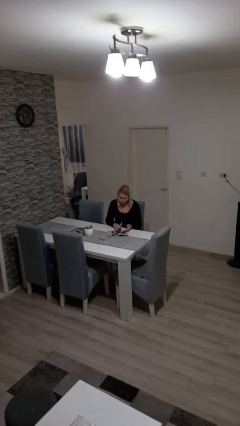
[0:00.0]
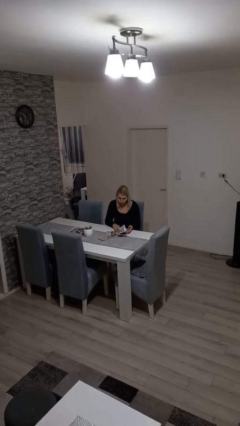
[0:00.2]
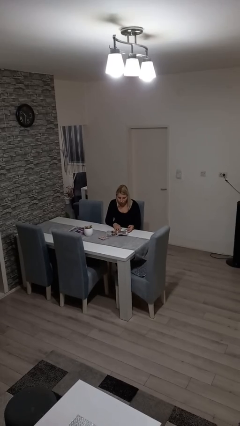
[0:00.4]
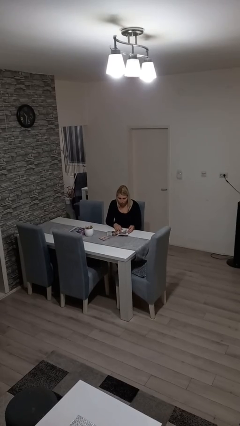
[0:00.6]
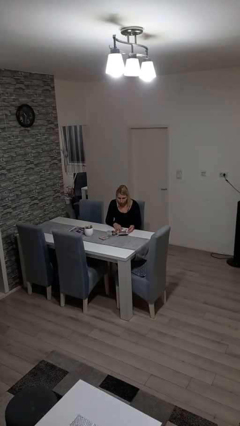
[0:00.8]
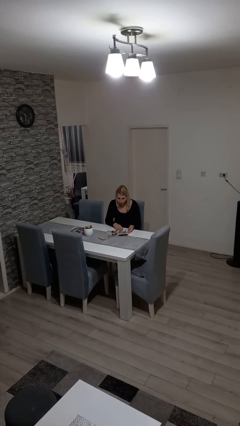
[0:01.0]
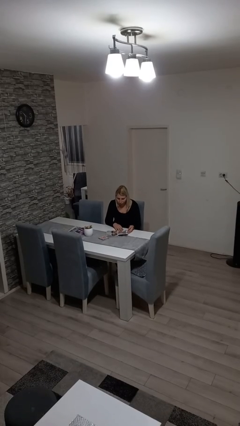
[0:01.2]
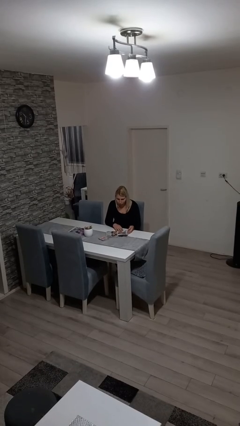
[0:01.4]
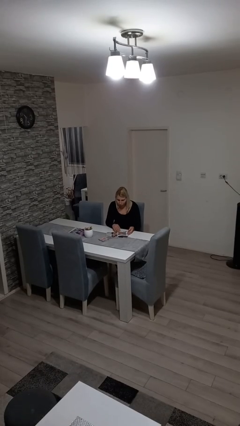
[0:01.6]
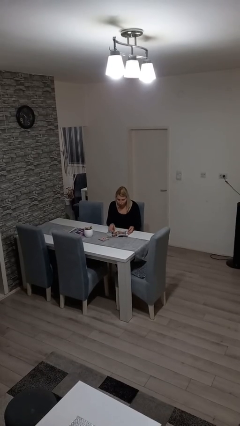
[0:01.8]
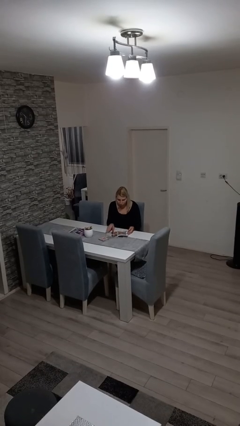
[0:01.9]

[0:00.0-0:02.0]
person reads magazine

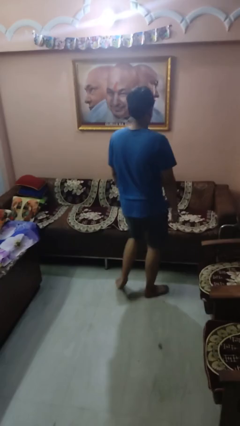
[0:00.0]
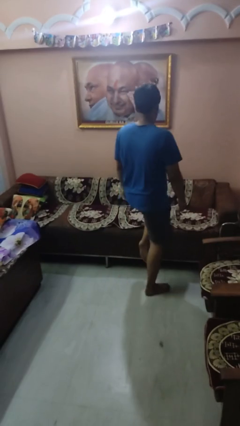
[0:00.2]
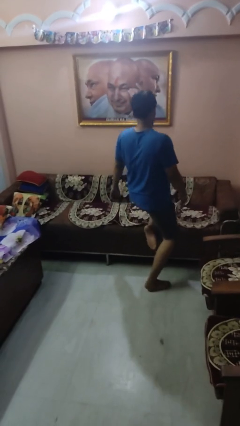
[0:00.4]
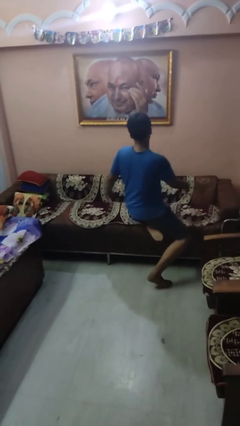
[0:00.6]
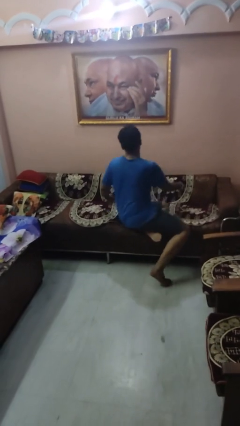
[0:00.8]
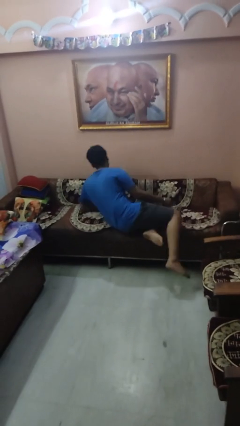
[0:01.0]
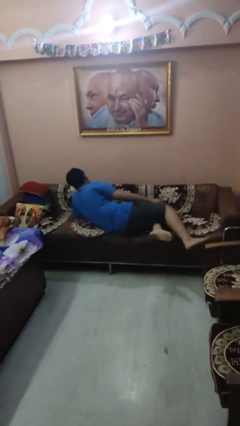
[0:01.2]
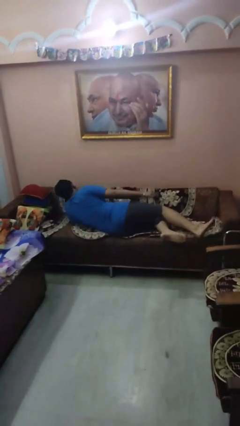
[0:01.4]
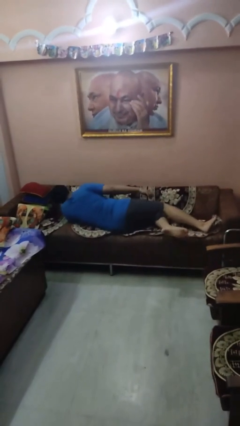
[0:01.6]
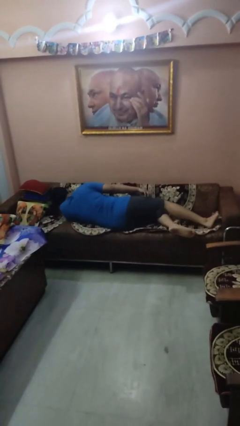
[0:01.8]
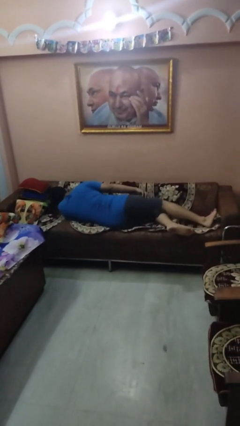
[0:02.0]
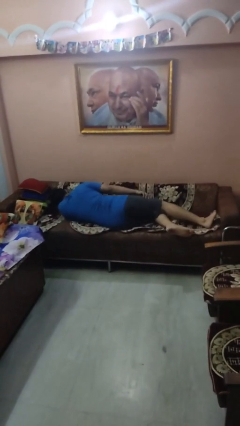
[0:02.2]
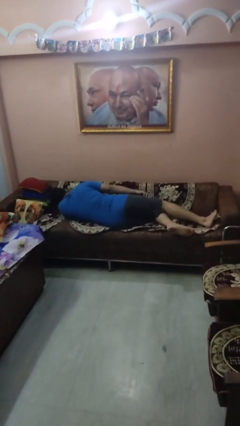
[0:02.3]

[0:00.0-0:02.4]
person lies down on couch

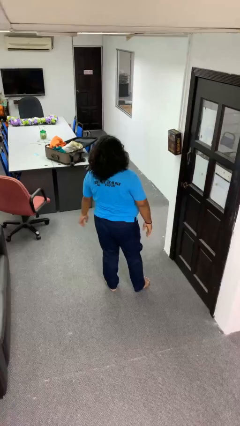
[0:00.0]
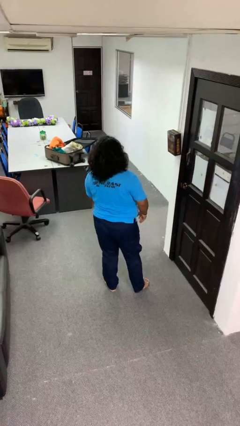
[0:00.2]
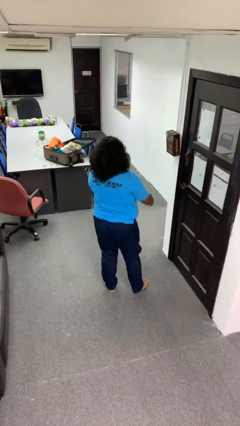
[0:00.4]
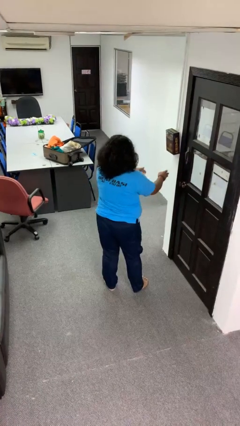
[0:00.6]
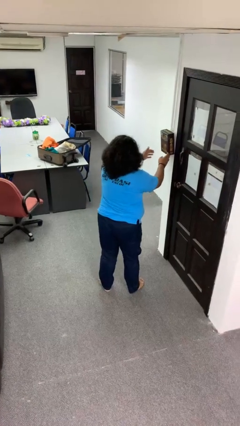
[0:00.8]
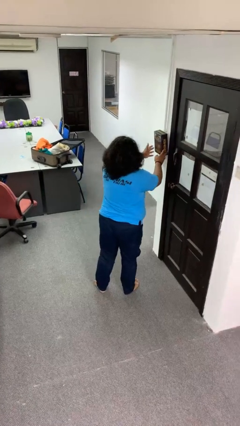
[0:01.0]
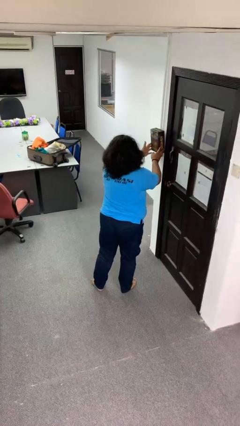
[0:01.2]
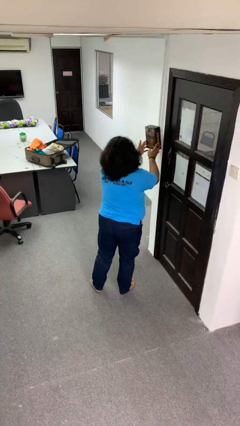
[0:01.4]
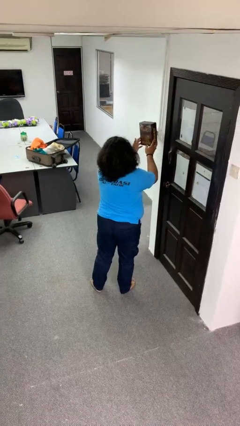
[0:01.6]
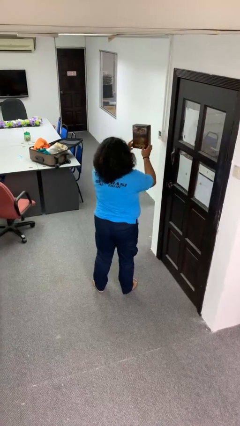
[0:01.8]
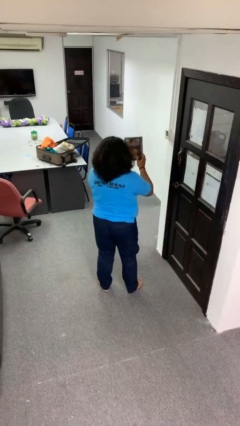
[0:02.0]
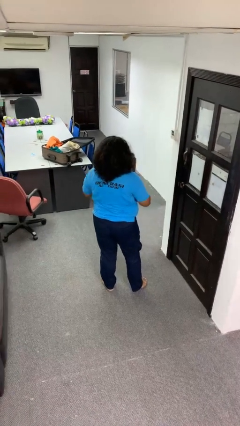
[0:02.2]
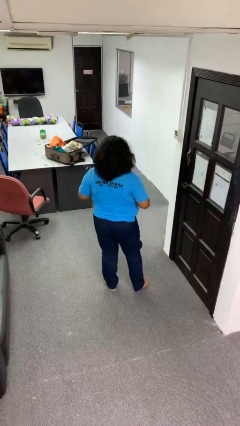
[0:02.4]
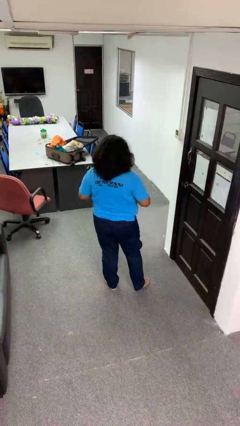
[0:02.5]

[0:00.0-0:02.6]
person takes down picture frame

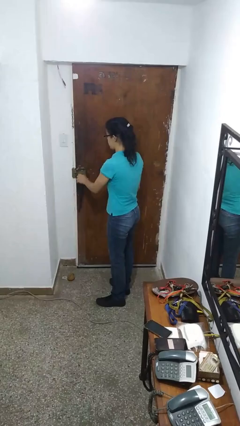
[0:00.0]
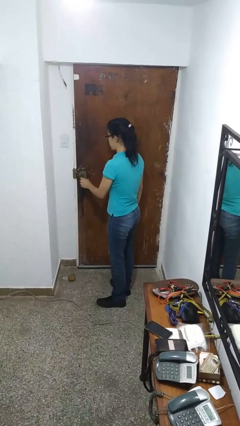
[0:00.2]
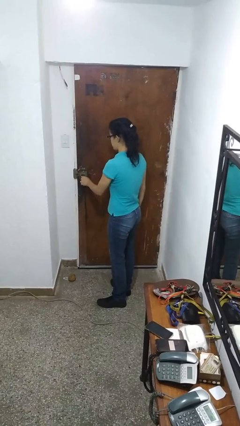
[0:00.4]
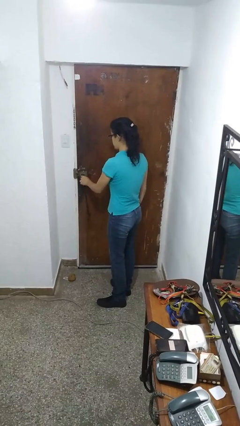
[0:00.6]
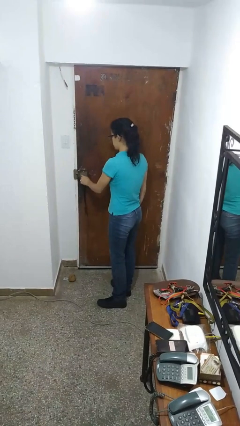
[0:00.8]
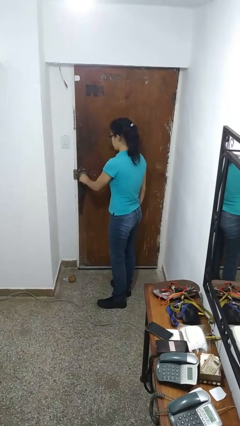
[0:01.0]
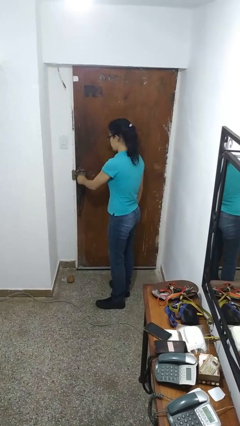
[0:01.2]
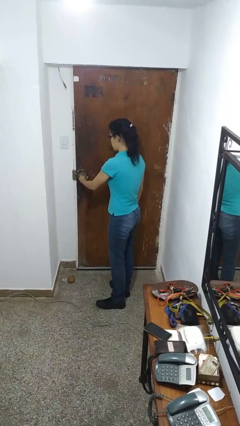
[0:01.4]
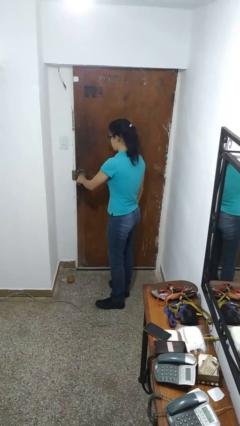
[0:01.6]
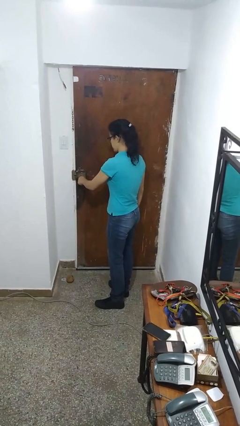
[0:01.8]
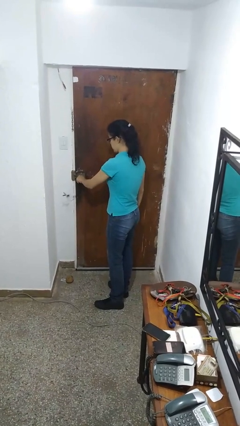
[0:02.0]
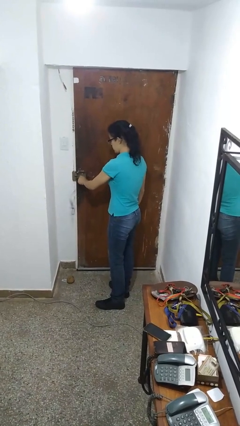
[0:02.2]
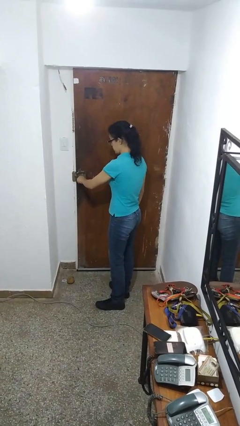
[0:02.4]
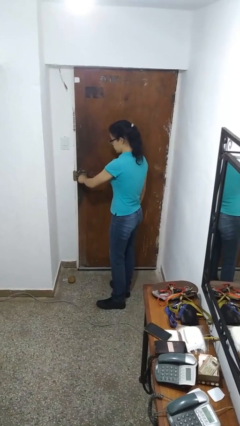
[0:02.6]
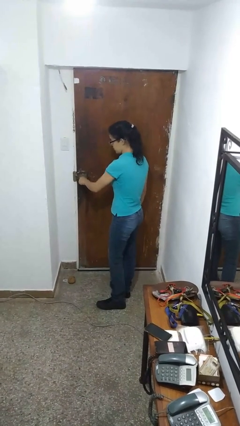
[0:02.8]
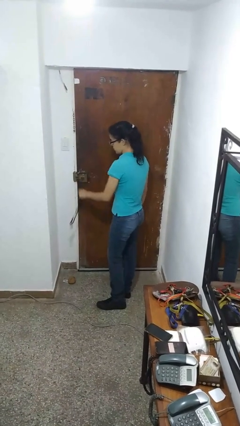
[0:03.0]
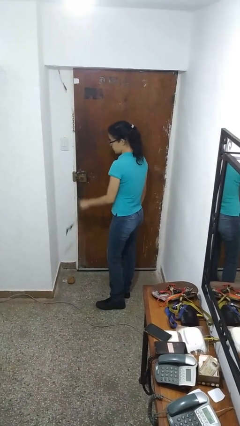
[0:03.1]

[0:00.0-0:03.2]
person locks door with keys

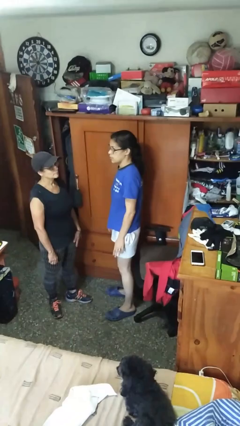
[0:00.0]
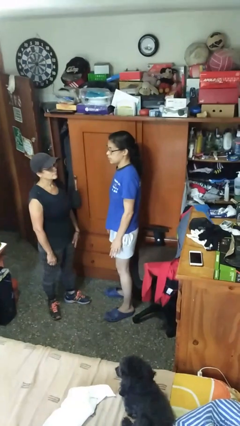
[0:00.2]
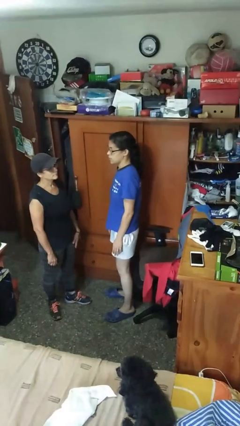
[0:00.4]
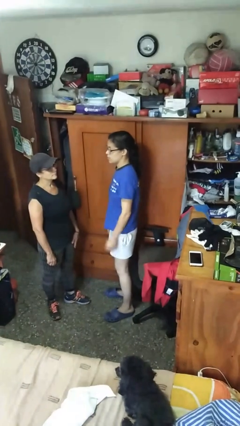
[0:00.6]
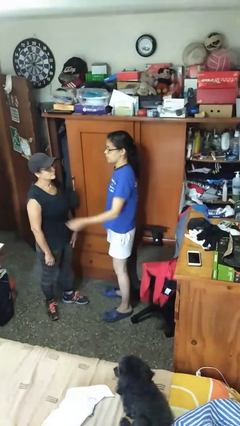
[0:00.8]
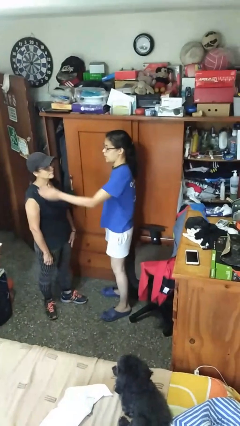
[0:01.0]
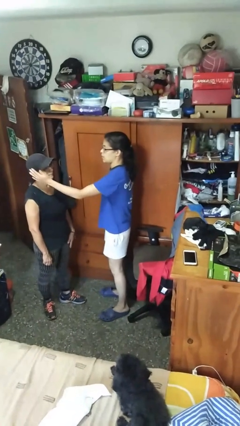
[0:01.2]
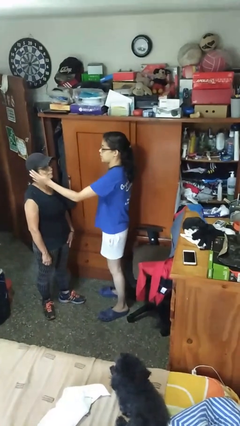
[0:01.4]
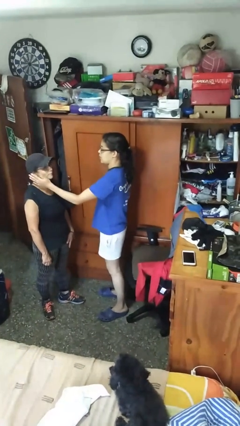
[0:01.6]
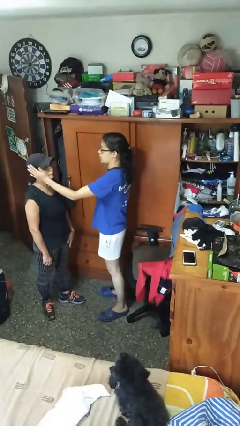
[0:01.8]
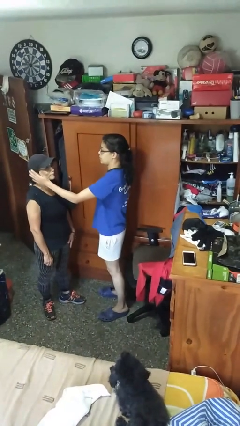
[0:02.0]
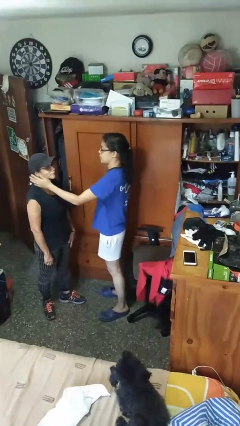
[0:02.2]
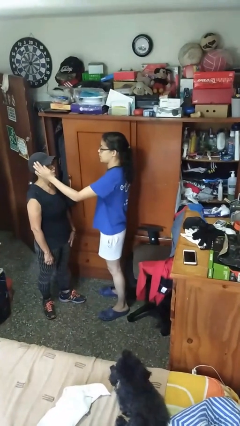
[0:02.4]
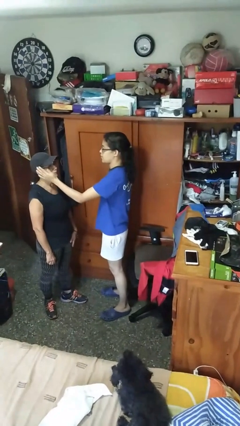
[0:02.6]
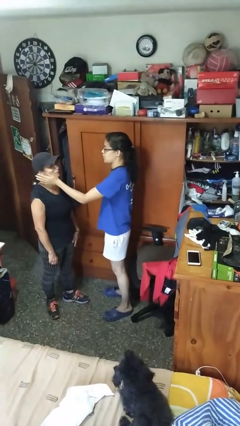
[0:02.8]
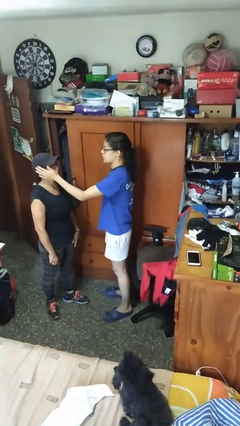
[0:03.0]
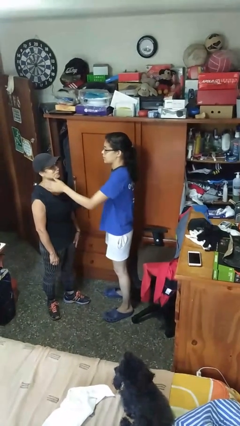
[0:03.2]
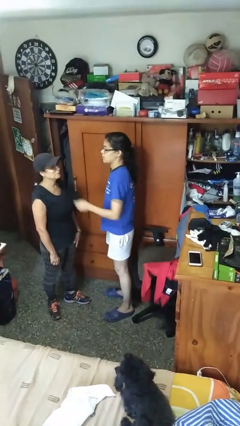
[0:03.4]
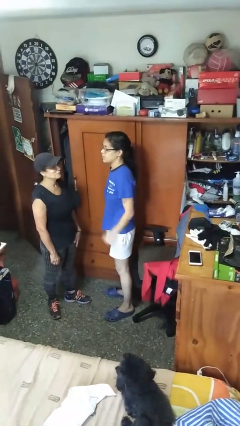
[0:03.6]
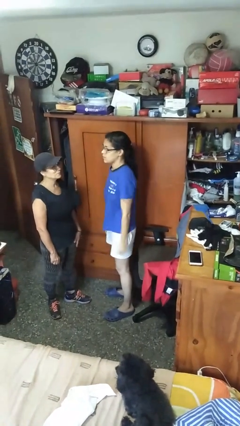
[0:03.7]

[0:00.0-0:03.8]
person touches face of person

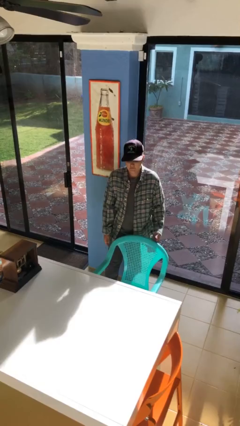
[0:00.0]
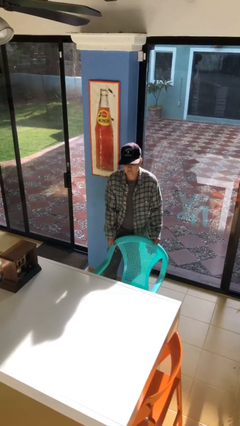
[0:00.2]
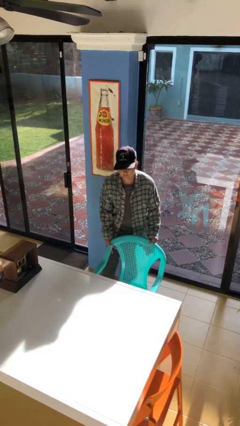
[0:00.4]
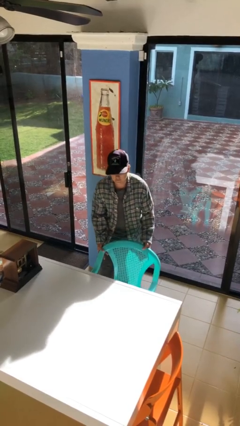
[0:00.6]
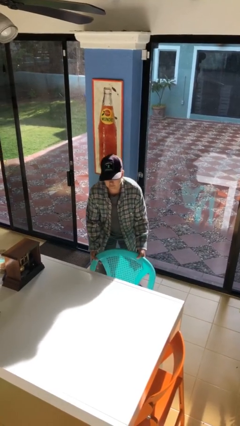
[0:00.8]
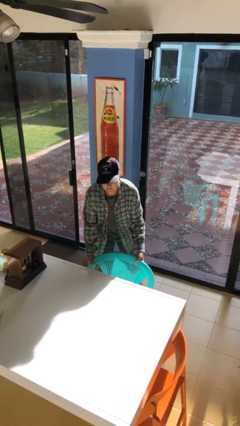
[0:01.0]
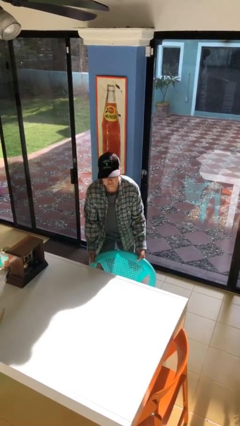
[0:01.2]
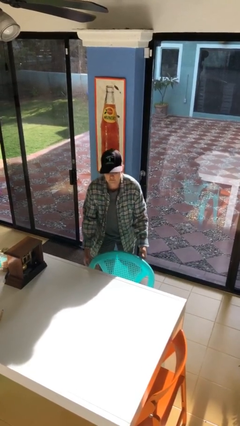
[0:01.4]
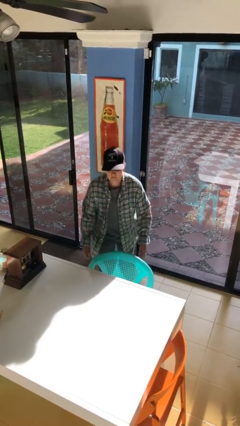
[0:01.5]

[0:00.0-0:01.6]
person pushes in chair

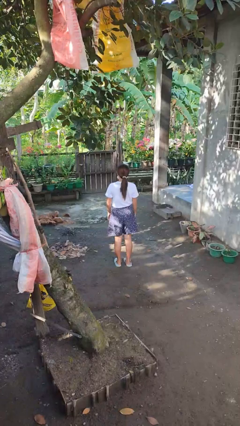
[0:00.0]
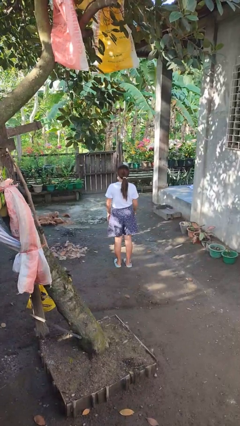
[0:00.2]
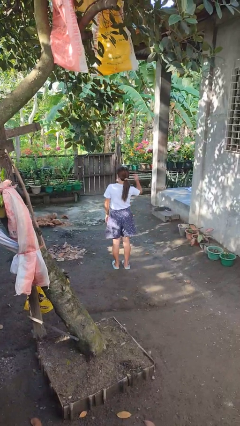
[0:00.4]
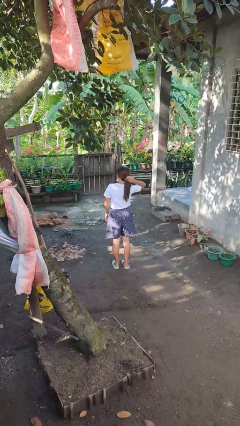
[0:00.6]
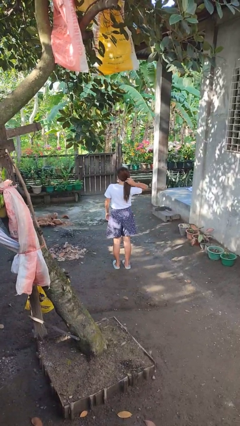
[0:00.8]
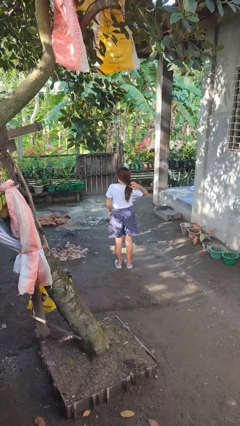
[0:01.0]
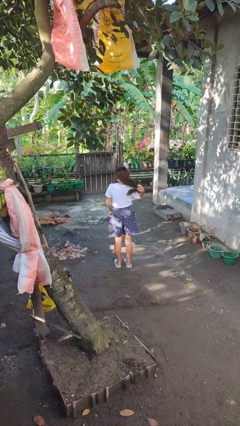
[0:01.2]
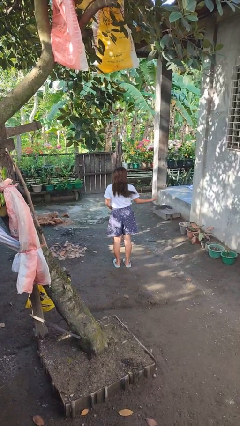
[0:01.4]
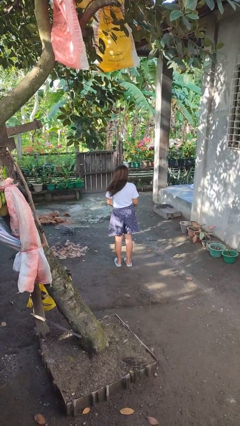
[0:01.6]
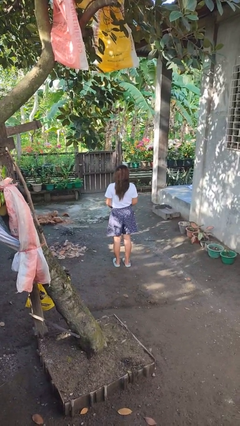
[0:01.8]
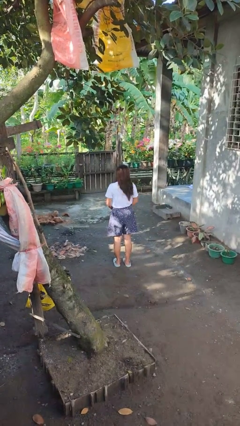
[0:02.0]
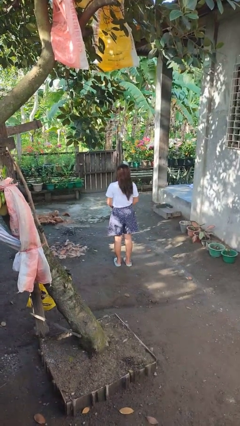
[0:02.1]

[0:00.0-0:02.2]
person takes off hairtie
